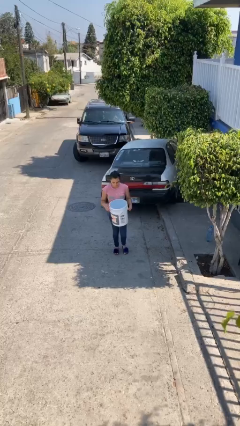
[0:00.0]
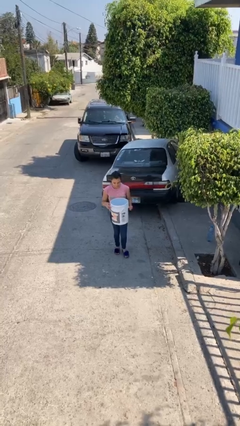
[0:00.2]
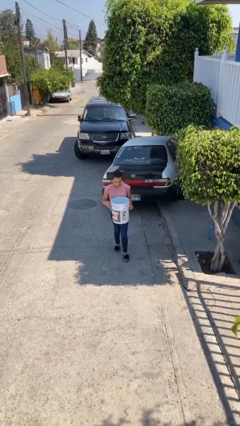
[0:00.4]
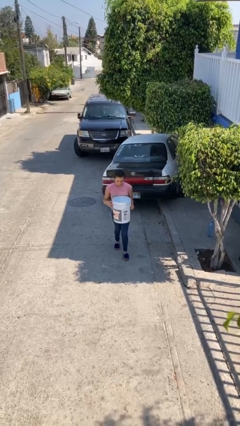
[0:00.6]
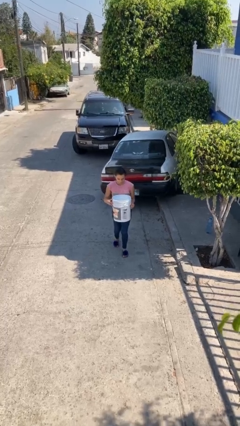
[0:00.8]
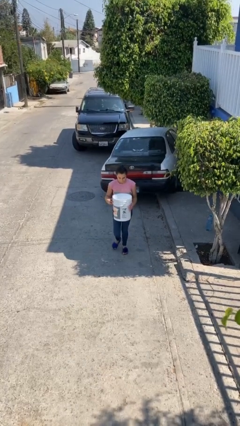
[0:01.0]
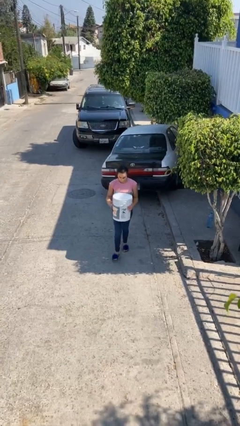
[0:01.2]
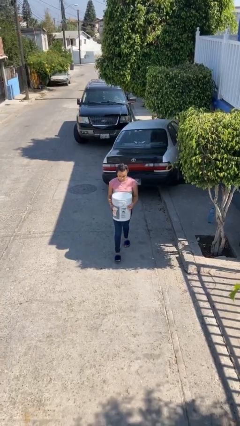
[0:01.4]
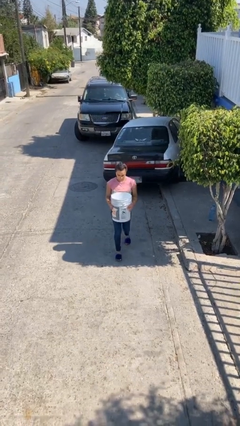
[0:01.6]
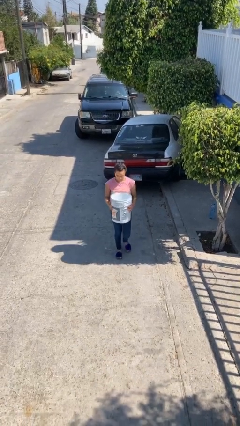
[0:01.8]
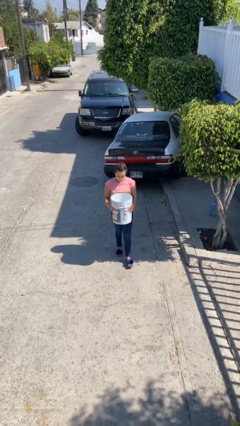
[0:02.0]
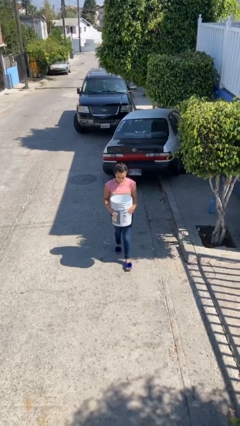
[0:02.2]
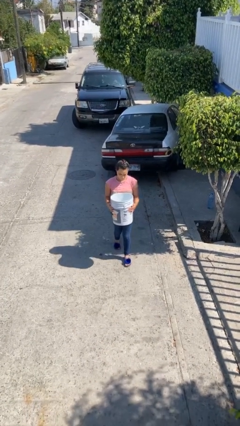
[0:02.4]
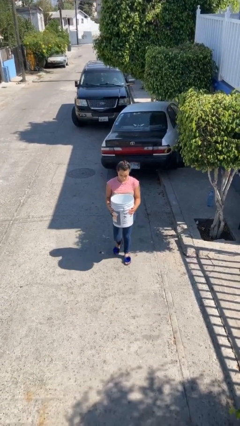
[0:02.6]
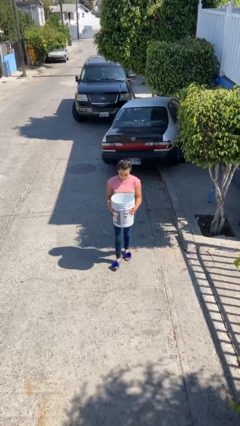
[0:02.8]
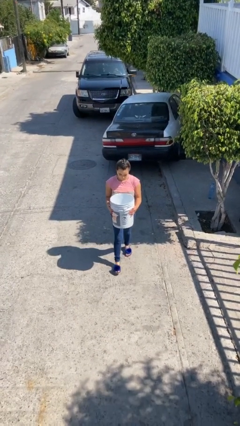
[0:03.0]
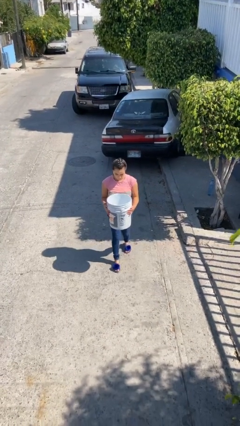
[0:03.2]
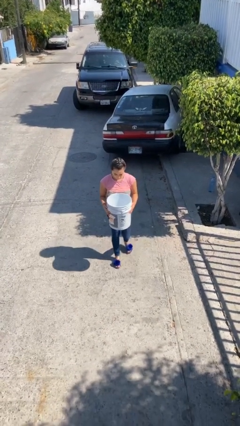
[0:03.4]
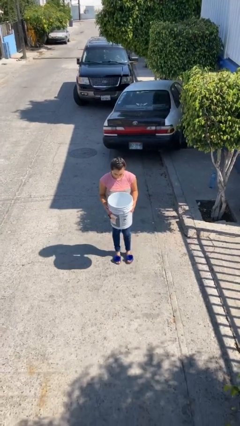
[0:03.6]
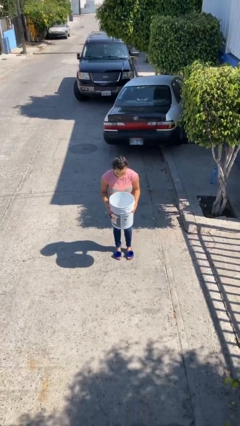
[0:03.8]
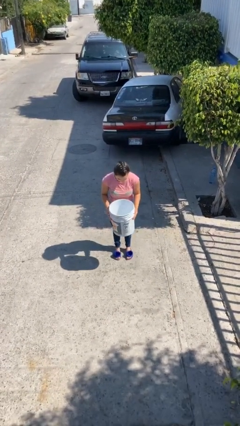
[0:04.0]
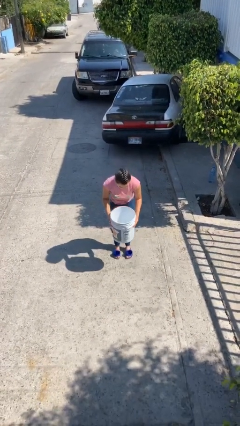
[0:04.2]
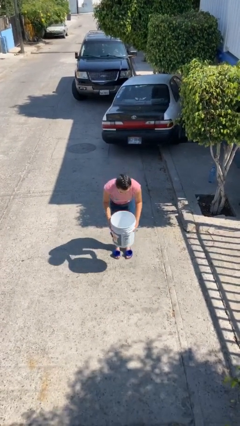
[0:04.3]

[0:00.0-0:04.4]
person carries heavy object

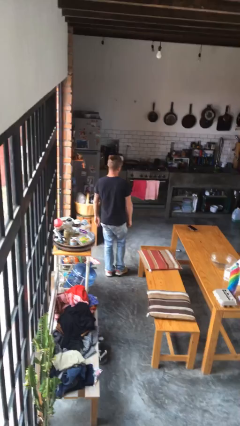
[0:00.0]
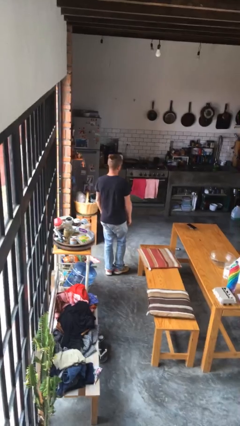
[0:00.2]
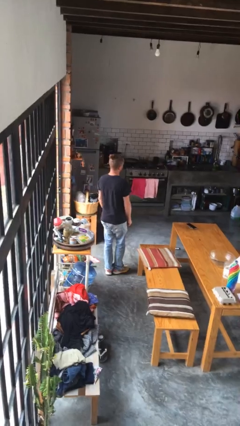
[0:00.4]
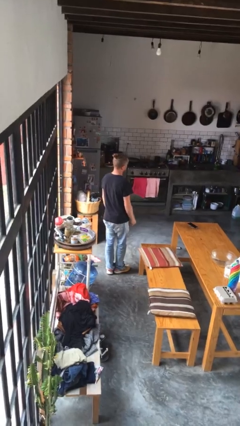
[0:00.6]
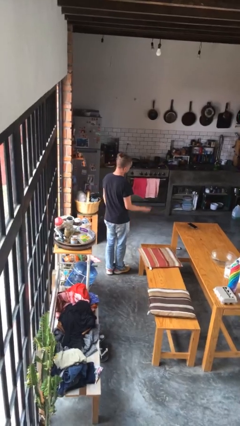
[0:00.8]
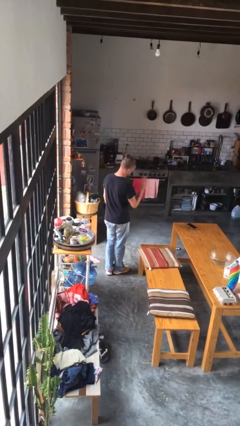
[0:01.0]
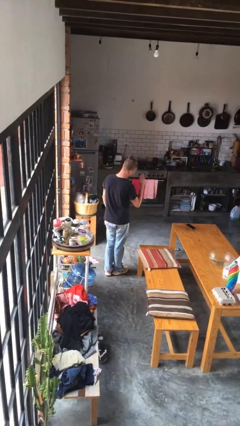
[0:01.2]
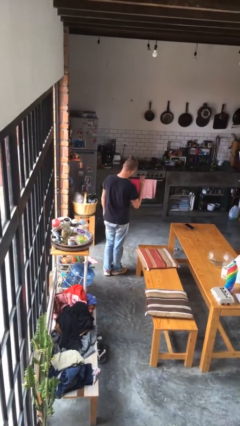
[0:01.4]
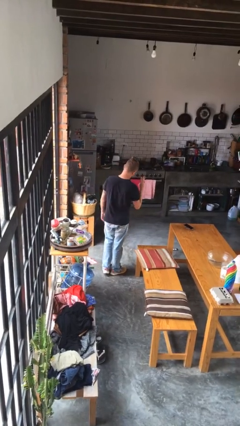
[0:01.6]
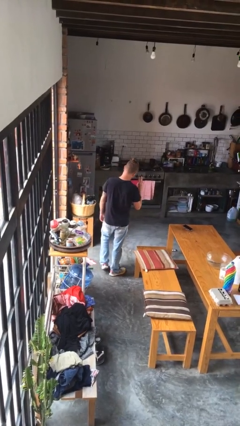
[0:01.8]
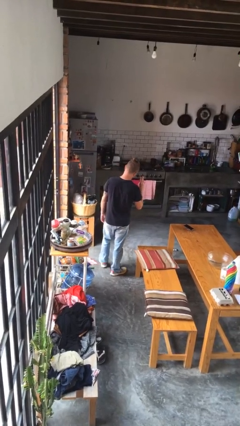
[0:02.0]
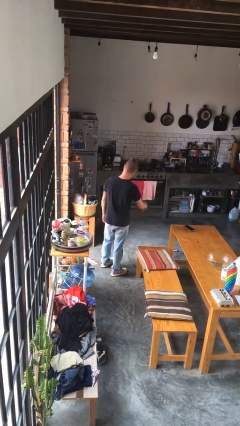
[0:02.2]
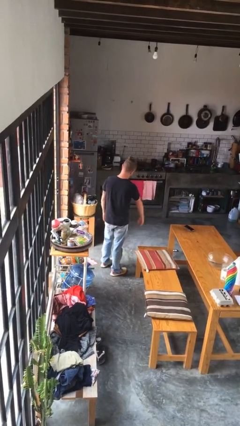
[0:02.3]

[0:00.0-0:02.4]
person gestures number three

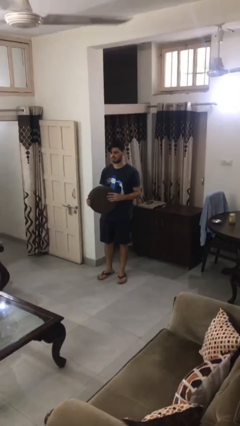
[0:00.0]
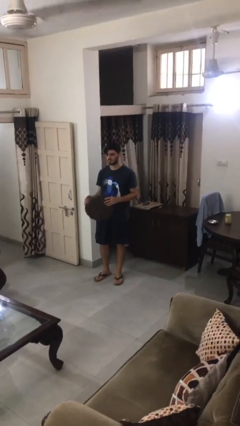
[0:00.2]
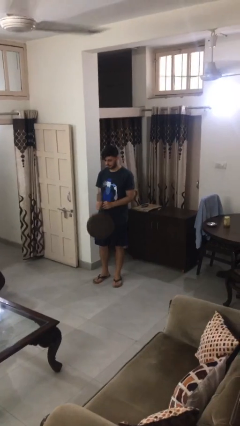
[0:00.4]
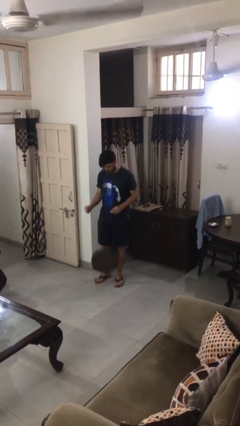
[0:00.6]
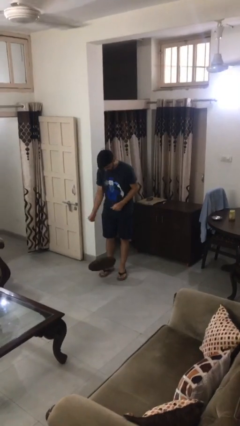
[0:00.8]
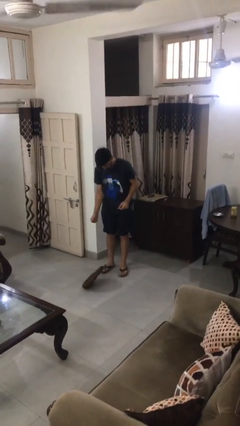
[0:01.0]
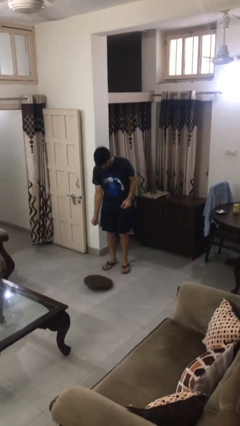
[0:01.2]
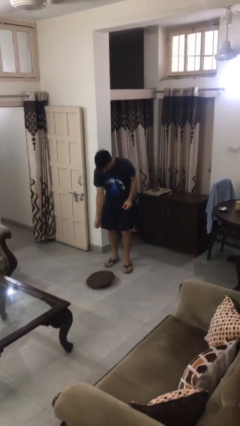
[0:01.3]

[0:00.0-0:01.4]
person drops object

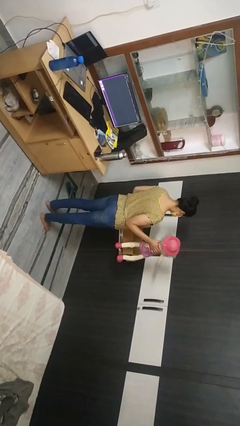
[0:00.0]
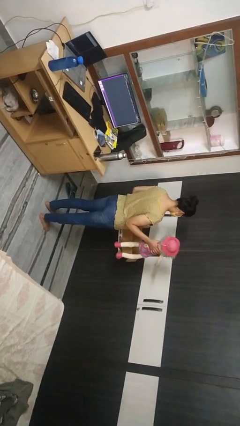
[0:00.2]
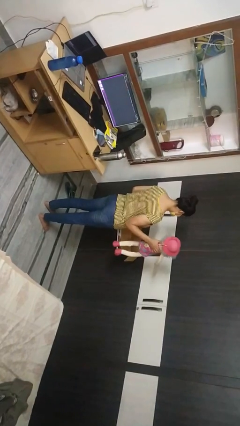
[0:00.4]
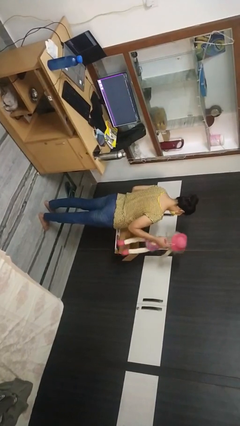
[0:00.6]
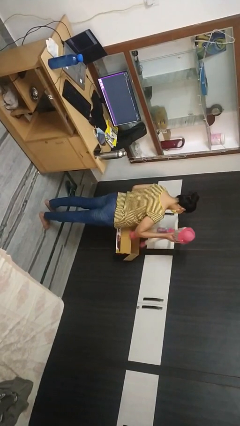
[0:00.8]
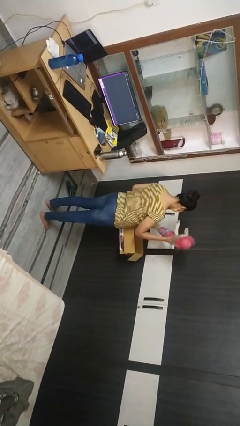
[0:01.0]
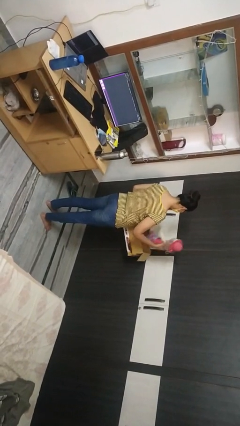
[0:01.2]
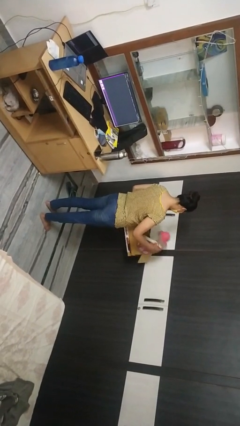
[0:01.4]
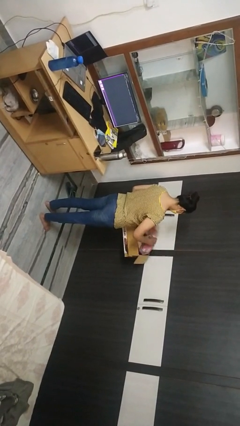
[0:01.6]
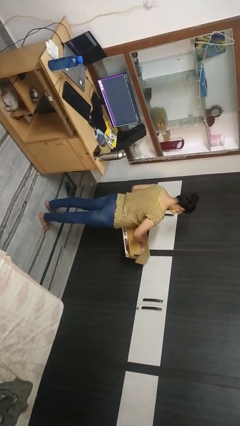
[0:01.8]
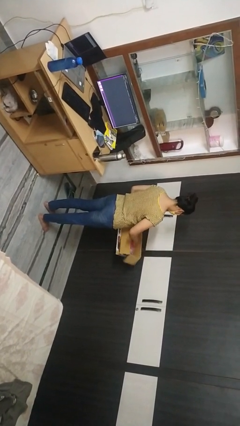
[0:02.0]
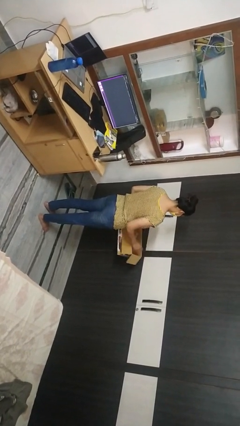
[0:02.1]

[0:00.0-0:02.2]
person puts object into box

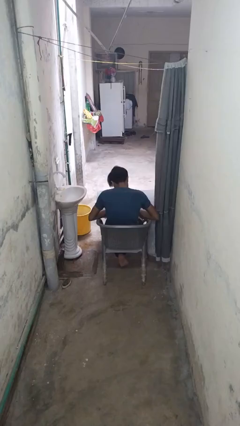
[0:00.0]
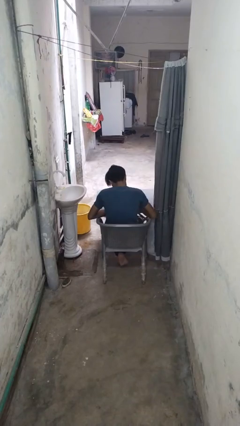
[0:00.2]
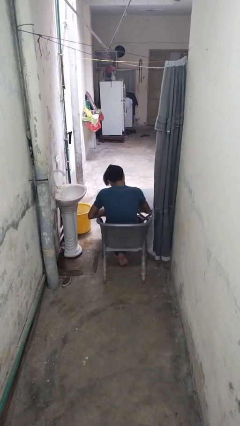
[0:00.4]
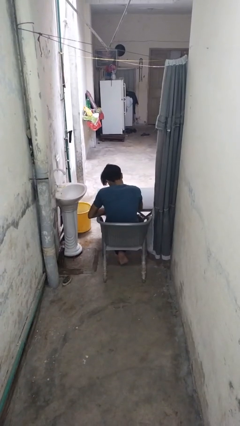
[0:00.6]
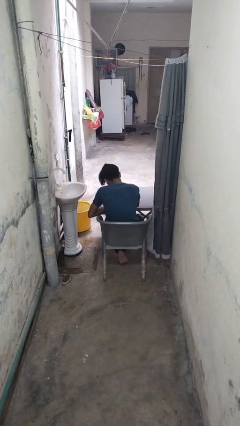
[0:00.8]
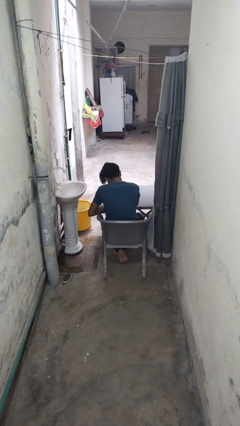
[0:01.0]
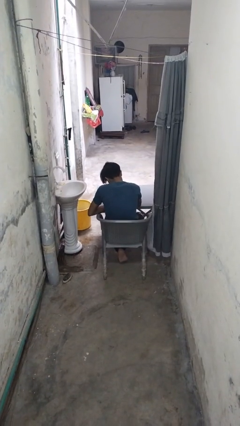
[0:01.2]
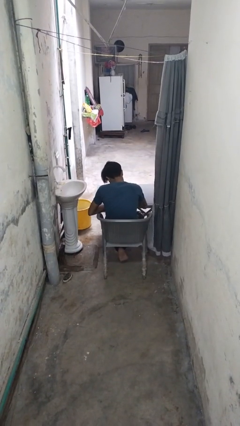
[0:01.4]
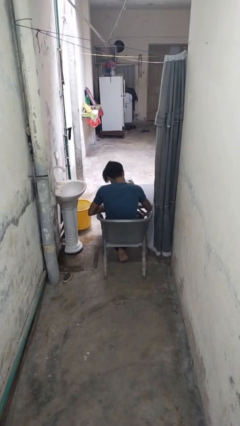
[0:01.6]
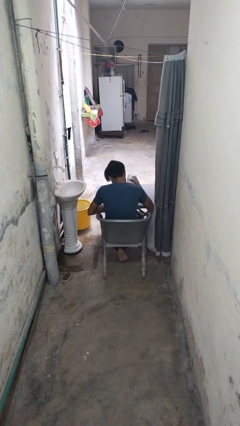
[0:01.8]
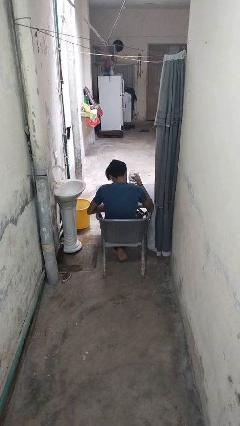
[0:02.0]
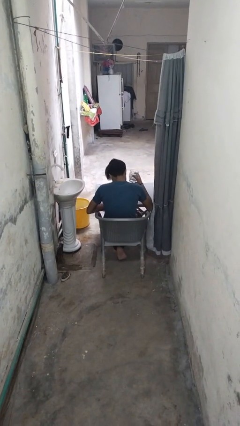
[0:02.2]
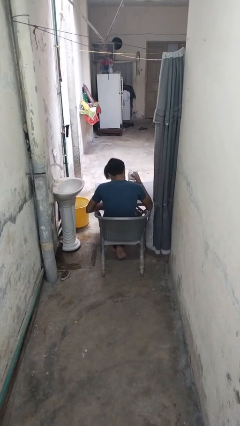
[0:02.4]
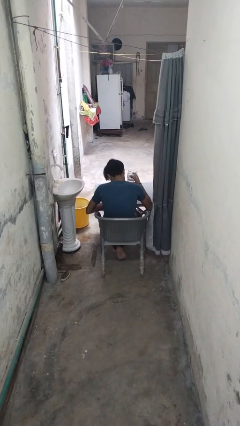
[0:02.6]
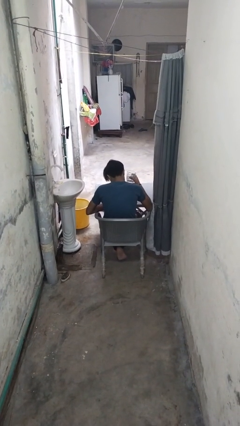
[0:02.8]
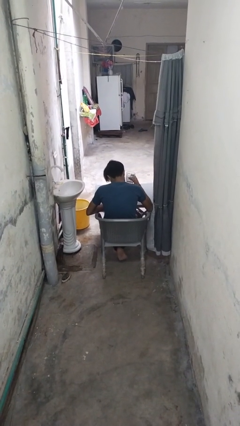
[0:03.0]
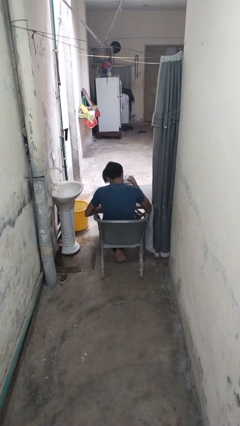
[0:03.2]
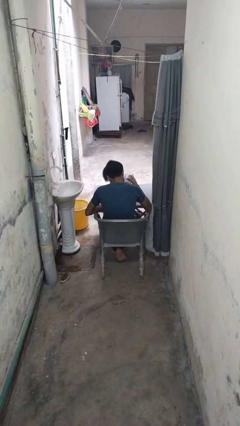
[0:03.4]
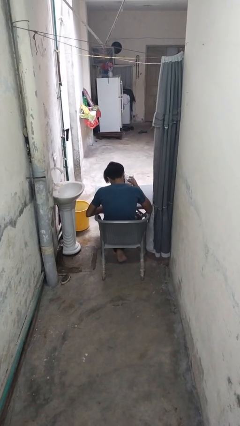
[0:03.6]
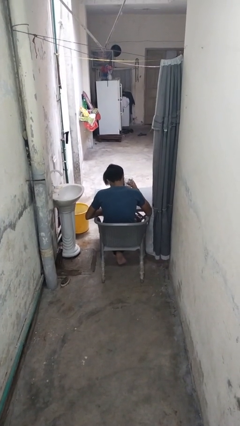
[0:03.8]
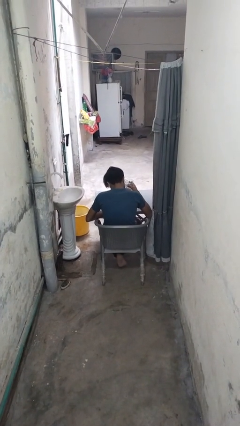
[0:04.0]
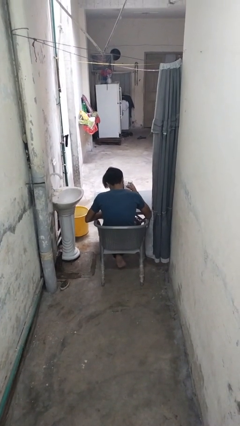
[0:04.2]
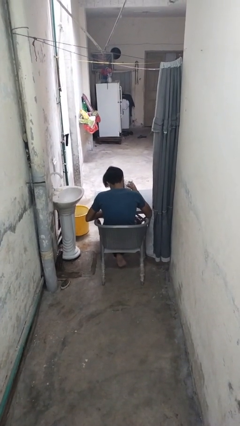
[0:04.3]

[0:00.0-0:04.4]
person picks up object from table

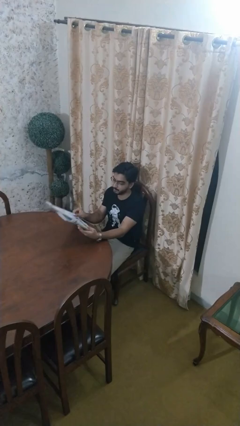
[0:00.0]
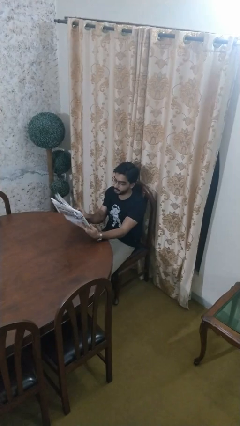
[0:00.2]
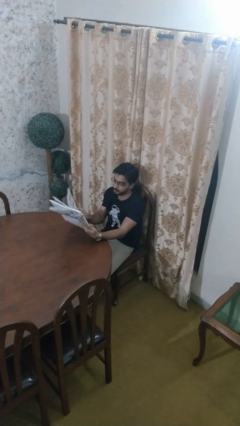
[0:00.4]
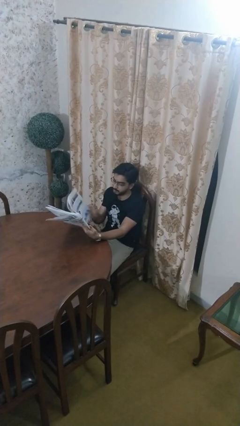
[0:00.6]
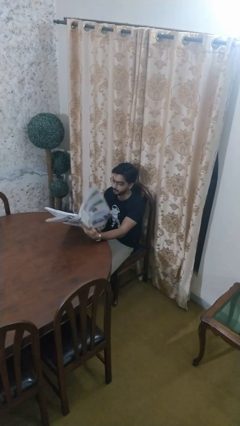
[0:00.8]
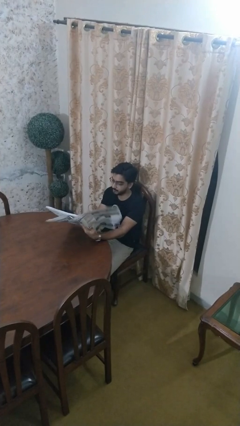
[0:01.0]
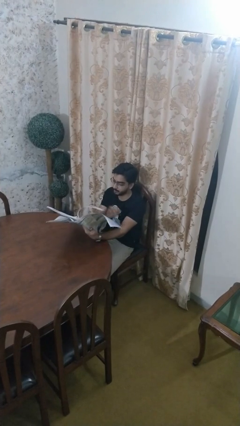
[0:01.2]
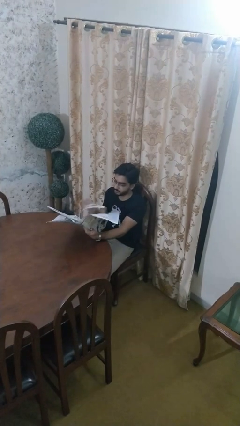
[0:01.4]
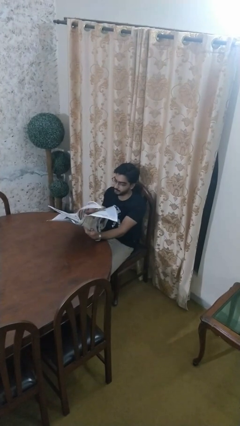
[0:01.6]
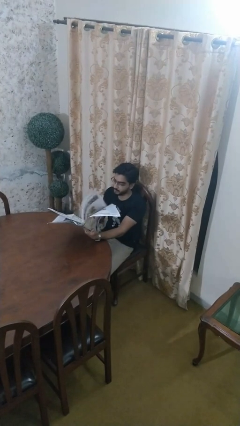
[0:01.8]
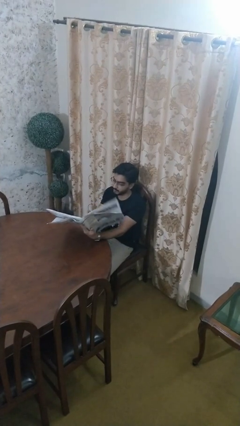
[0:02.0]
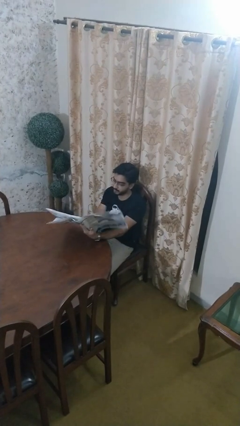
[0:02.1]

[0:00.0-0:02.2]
person reads magazine

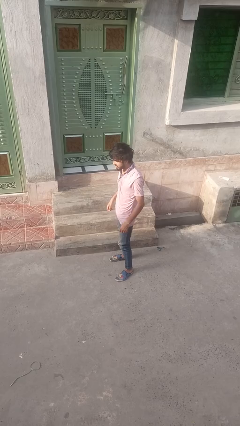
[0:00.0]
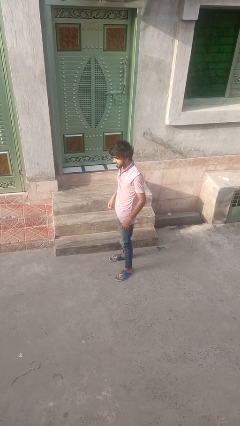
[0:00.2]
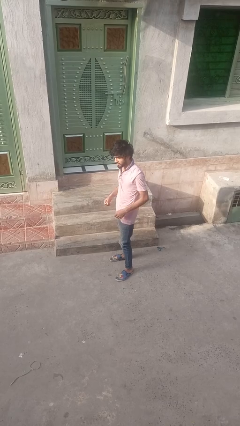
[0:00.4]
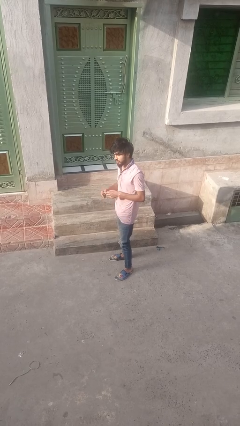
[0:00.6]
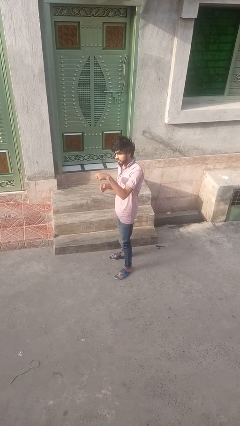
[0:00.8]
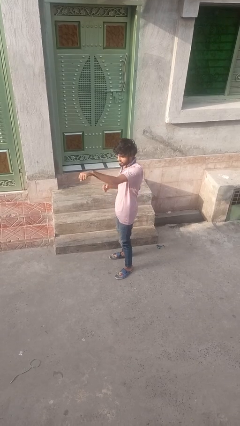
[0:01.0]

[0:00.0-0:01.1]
person punches
